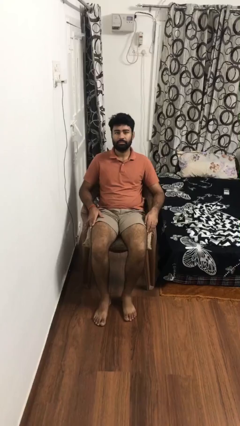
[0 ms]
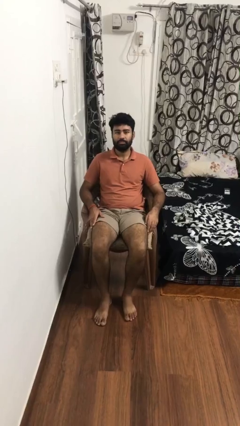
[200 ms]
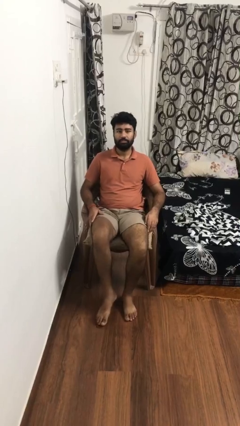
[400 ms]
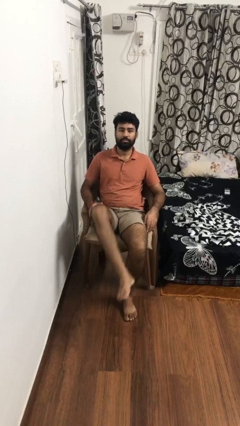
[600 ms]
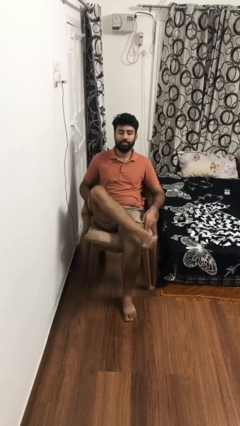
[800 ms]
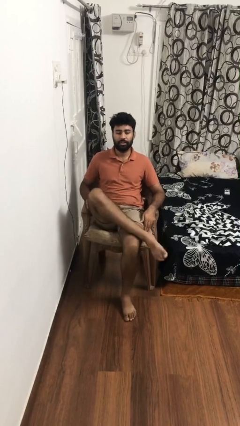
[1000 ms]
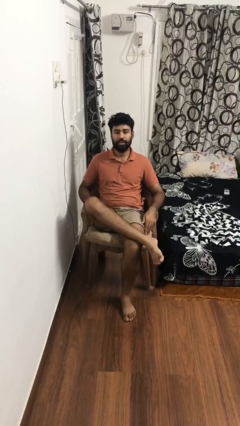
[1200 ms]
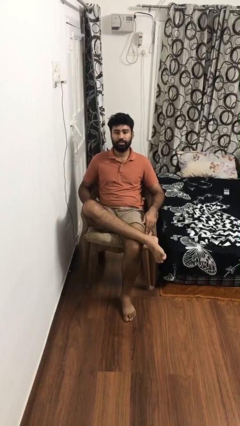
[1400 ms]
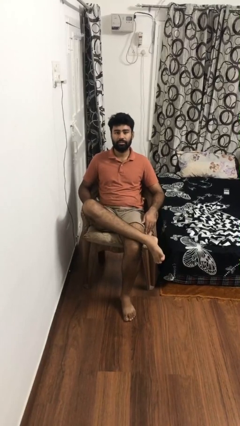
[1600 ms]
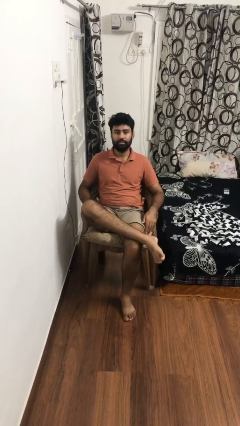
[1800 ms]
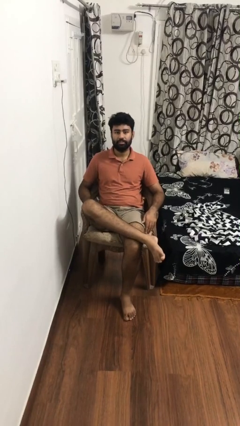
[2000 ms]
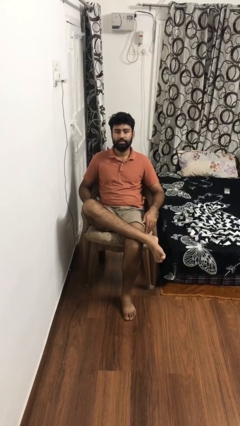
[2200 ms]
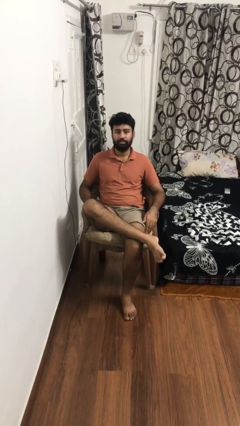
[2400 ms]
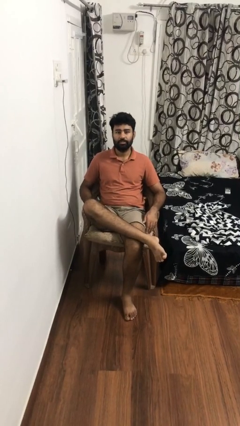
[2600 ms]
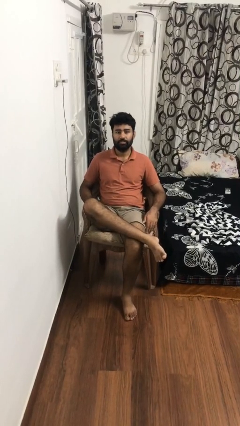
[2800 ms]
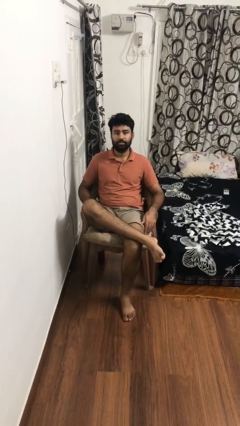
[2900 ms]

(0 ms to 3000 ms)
person crosses legs

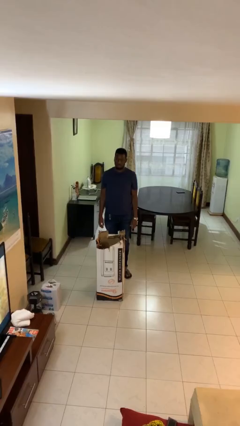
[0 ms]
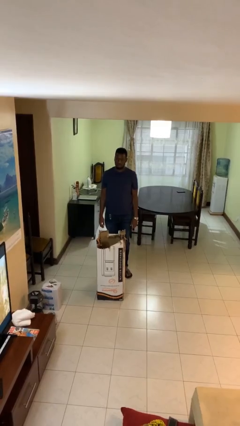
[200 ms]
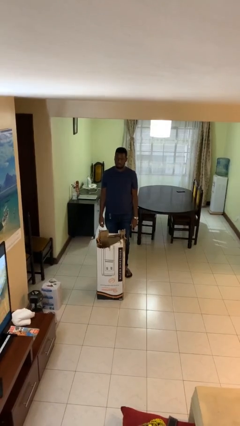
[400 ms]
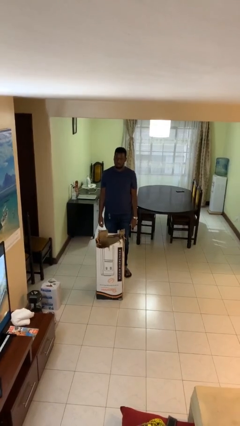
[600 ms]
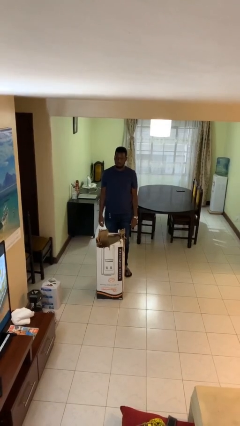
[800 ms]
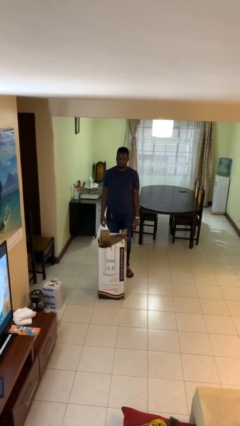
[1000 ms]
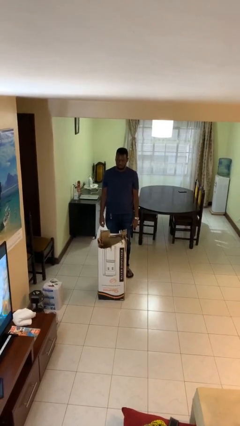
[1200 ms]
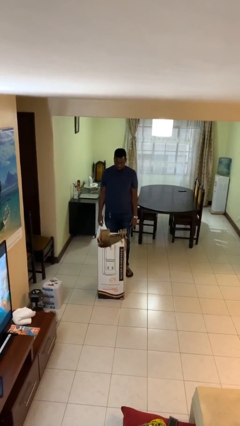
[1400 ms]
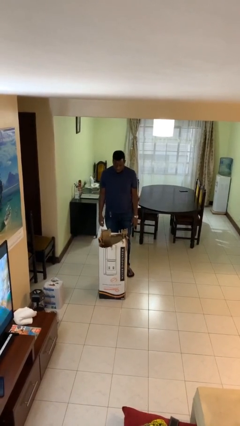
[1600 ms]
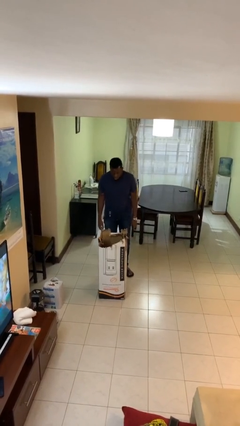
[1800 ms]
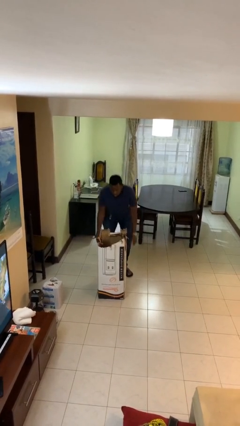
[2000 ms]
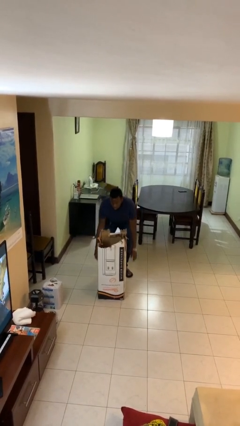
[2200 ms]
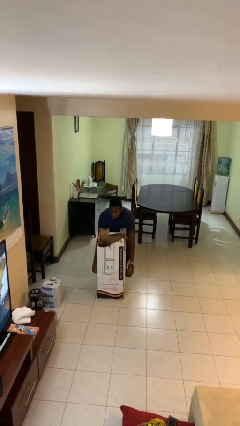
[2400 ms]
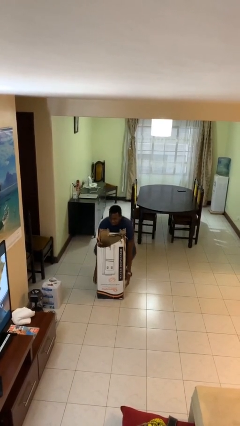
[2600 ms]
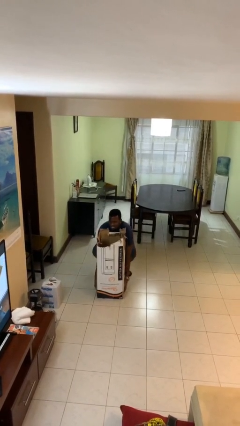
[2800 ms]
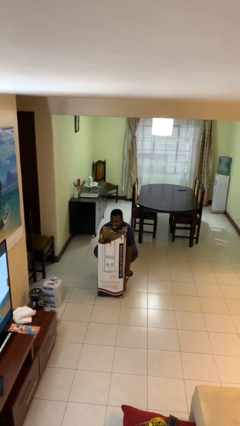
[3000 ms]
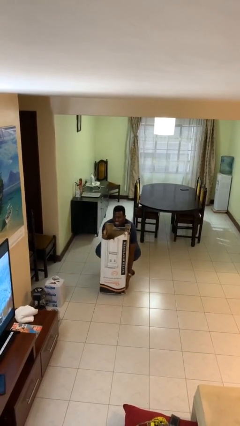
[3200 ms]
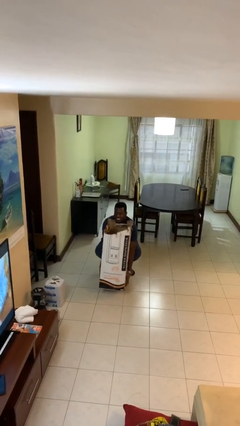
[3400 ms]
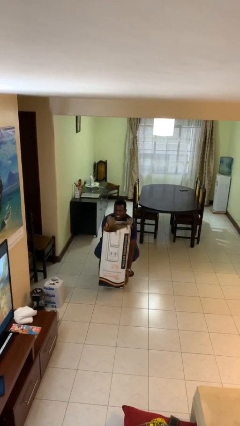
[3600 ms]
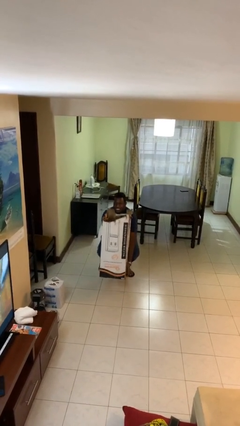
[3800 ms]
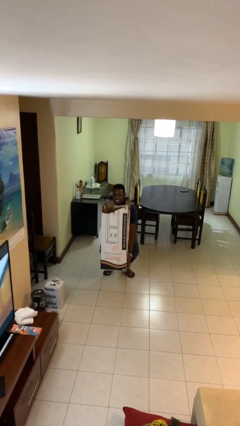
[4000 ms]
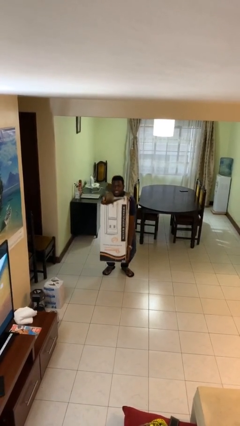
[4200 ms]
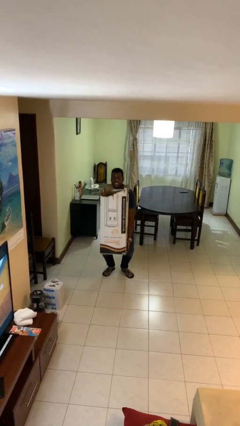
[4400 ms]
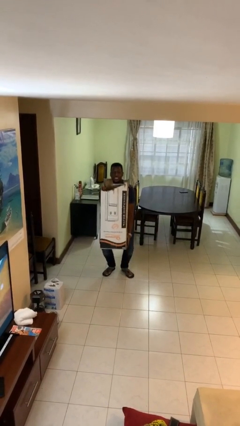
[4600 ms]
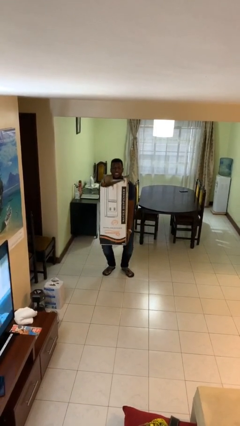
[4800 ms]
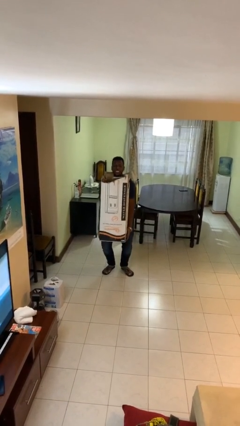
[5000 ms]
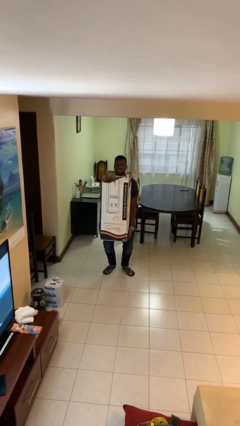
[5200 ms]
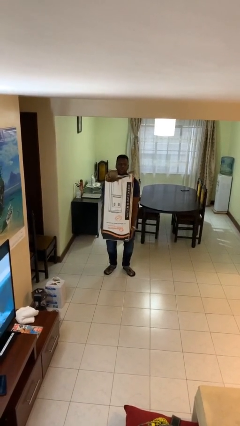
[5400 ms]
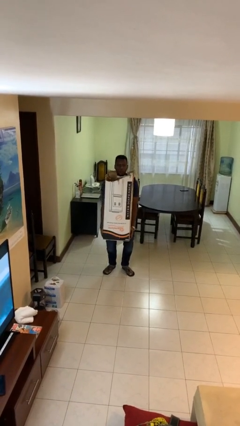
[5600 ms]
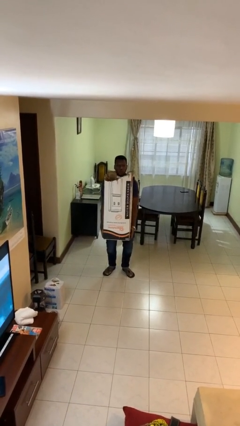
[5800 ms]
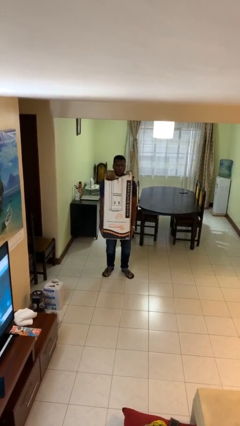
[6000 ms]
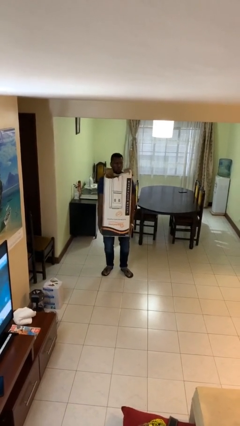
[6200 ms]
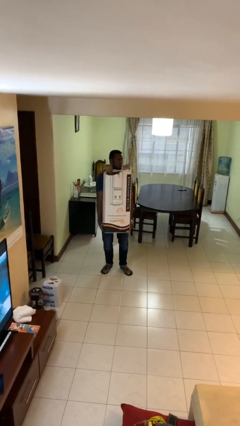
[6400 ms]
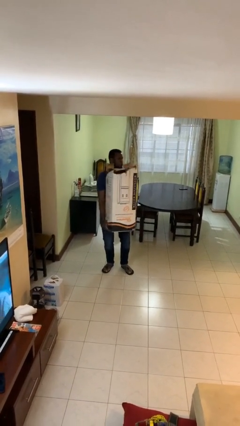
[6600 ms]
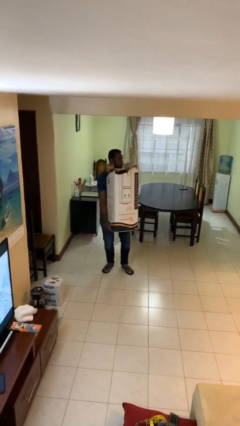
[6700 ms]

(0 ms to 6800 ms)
person picks up object from floor

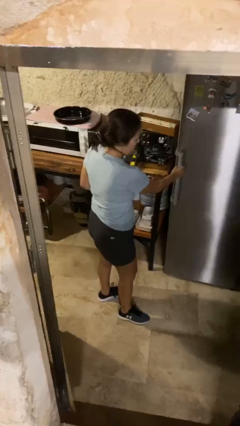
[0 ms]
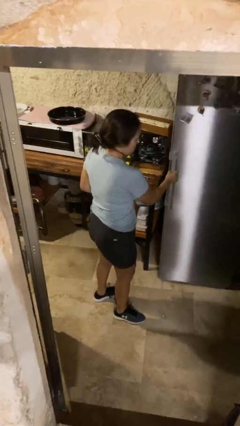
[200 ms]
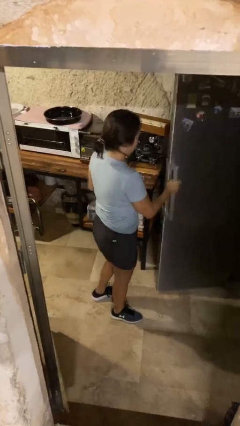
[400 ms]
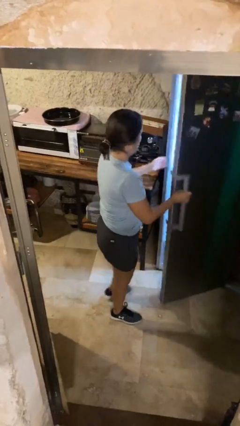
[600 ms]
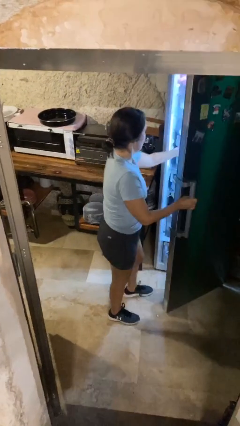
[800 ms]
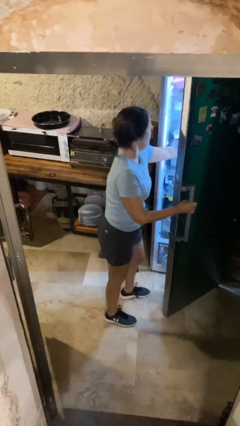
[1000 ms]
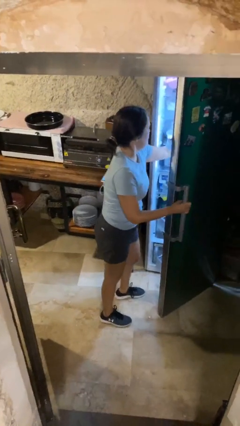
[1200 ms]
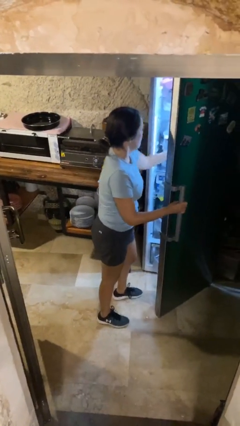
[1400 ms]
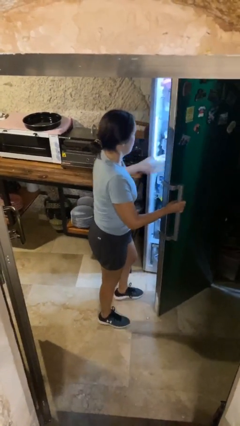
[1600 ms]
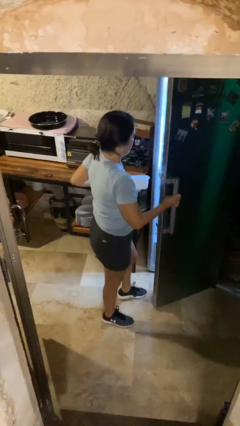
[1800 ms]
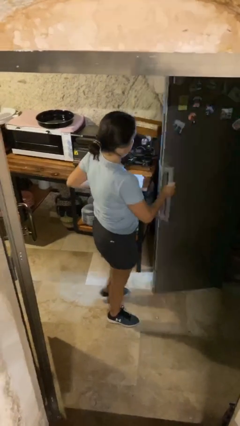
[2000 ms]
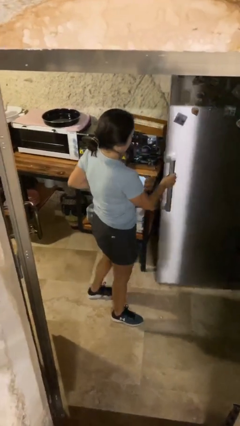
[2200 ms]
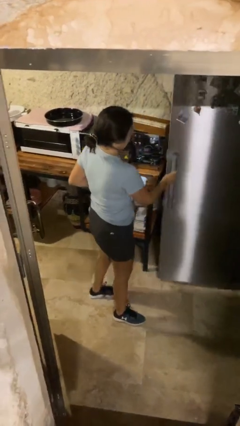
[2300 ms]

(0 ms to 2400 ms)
person takes object from refrigerator

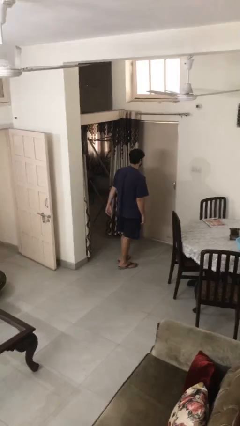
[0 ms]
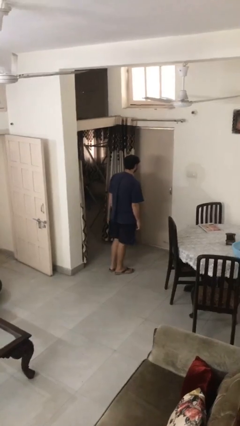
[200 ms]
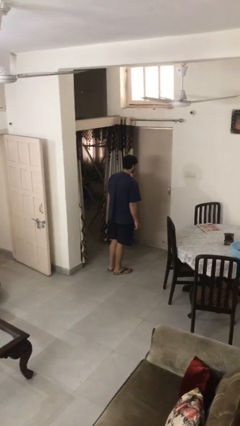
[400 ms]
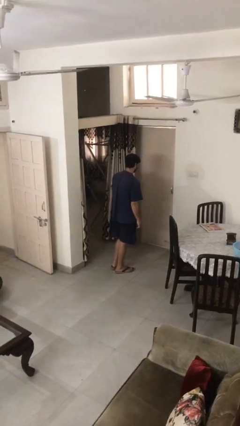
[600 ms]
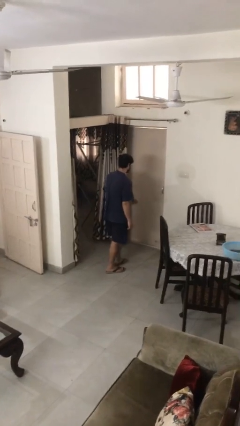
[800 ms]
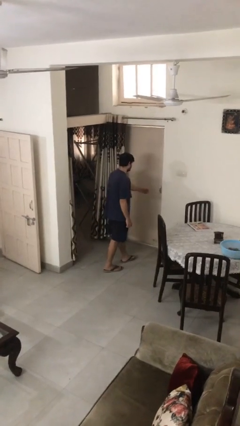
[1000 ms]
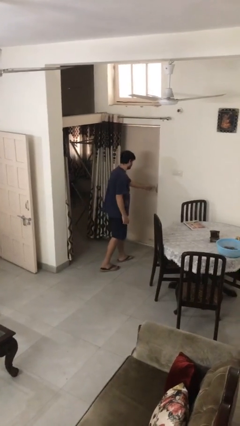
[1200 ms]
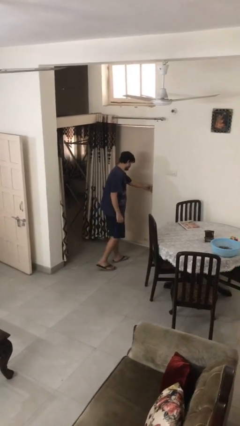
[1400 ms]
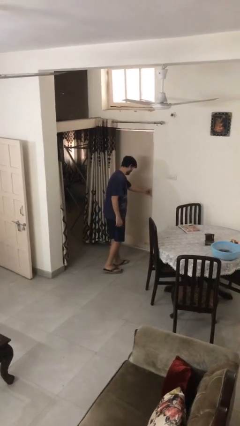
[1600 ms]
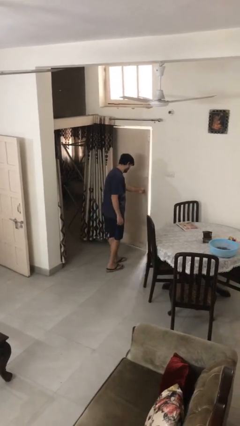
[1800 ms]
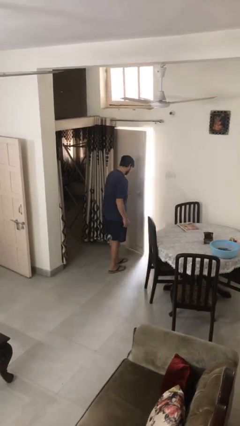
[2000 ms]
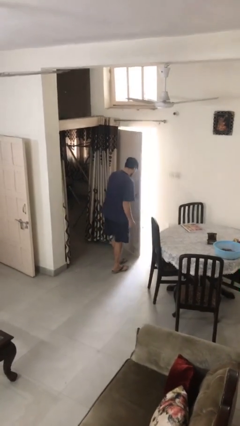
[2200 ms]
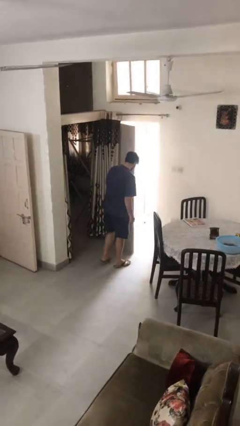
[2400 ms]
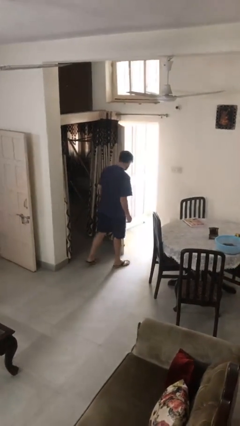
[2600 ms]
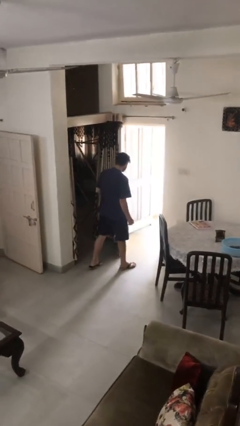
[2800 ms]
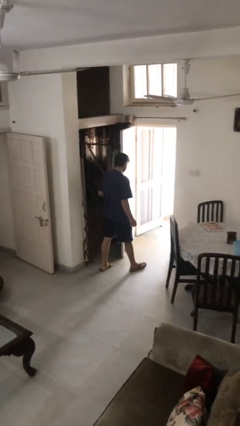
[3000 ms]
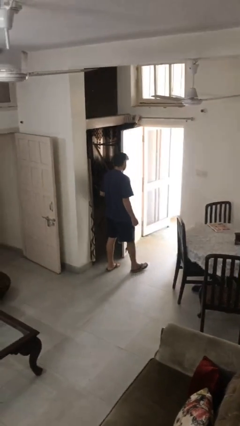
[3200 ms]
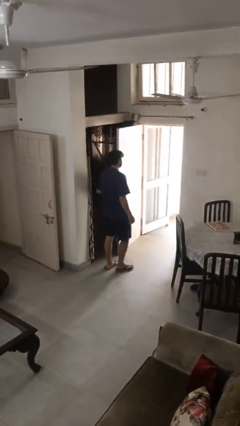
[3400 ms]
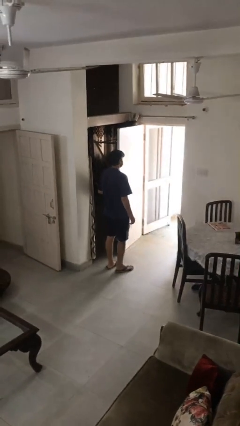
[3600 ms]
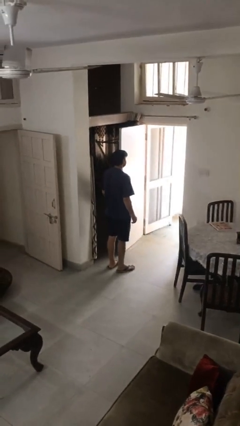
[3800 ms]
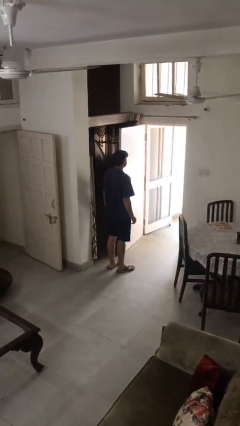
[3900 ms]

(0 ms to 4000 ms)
person opens facility door

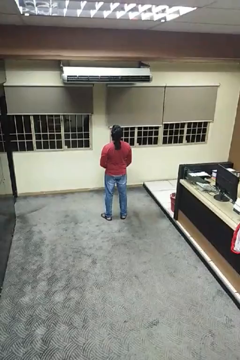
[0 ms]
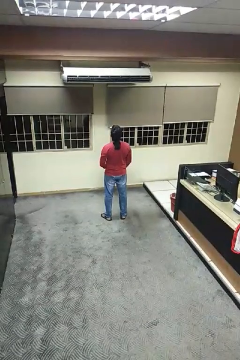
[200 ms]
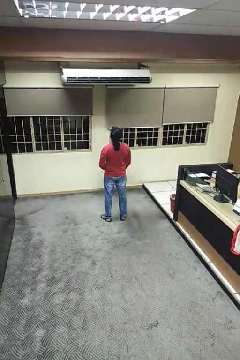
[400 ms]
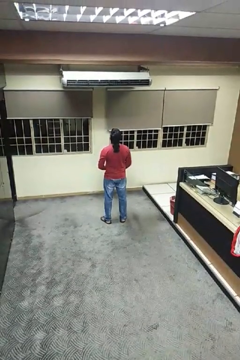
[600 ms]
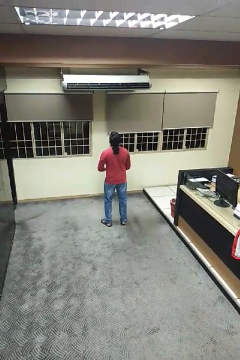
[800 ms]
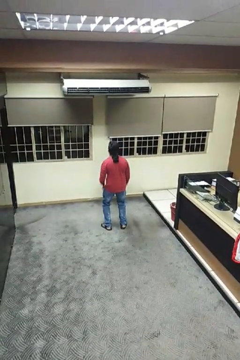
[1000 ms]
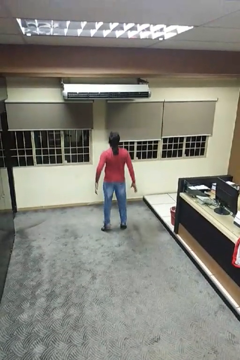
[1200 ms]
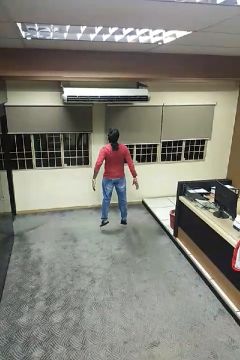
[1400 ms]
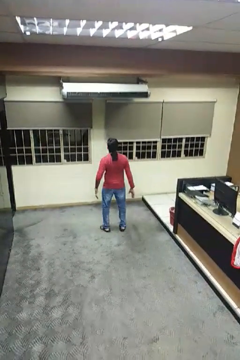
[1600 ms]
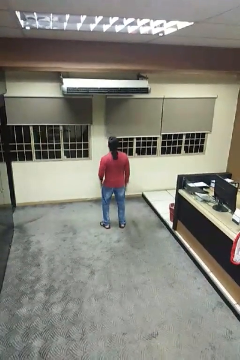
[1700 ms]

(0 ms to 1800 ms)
person jumps
